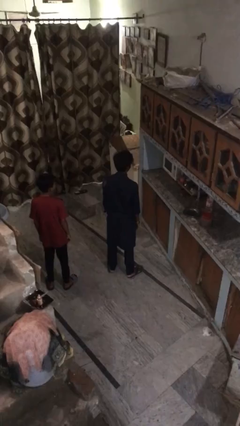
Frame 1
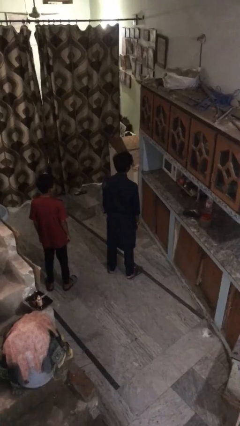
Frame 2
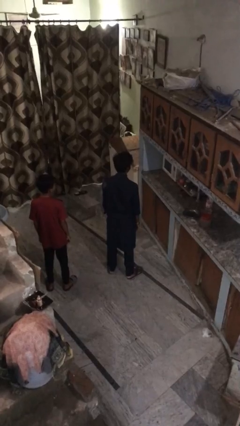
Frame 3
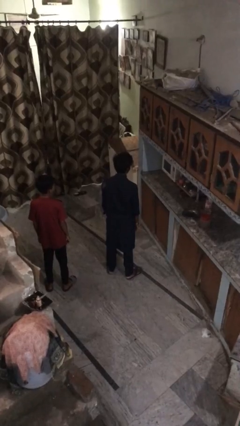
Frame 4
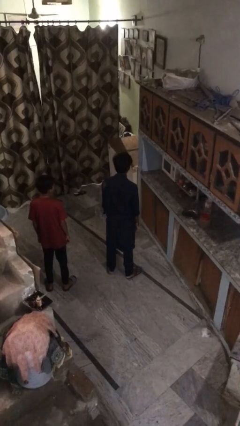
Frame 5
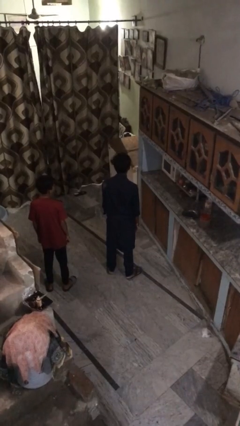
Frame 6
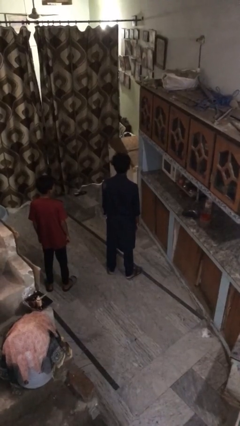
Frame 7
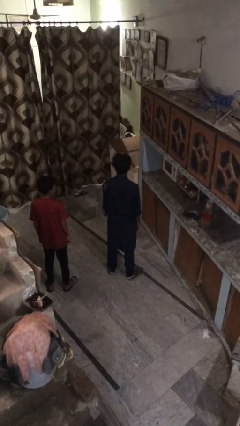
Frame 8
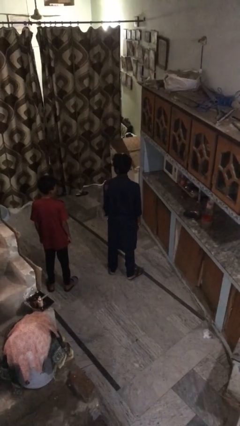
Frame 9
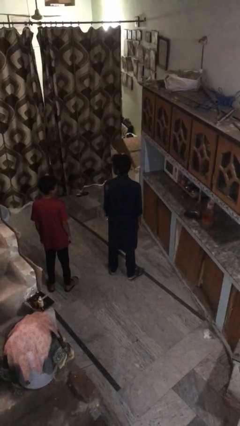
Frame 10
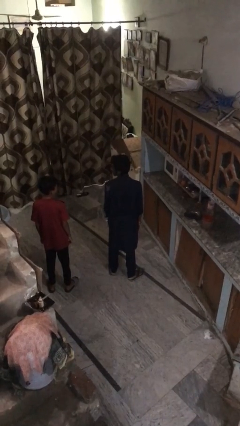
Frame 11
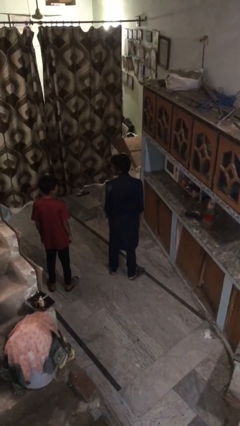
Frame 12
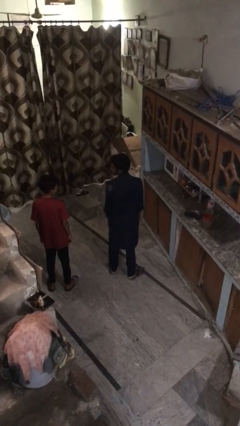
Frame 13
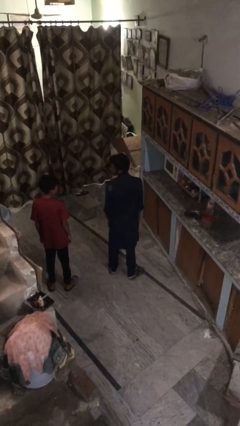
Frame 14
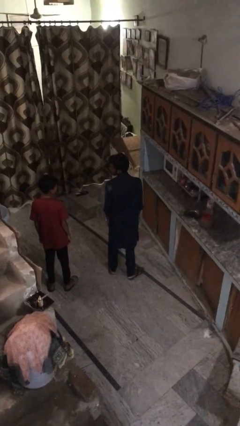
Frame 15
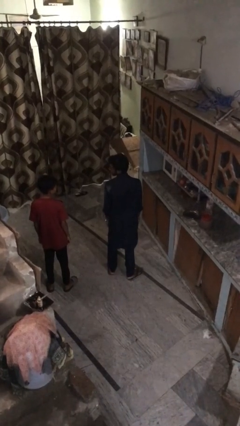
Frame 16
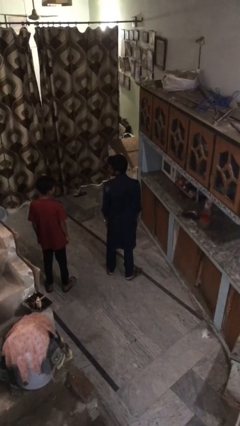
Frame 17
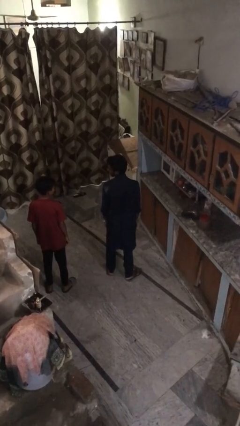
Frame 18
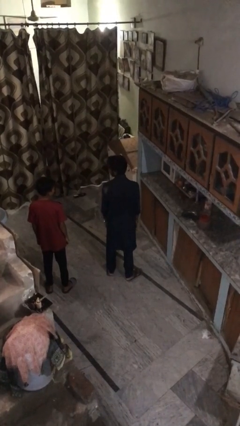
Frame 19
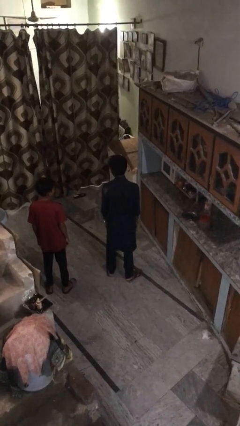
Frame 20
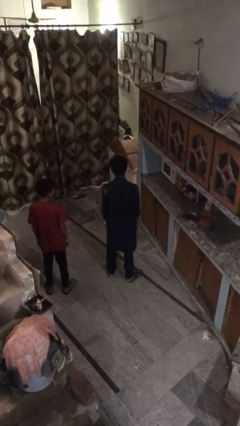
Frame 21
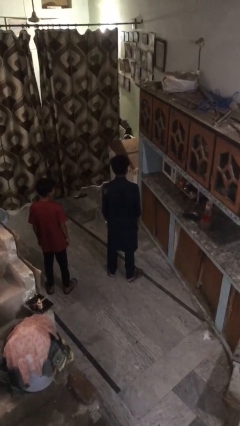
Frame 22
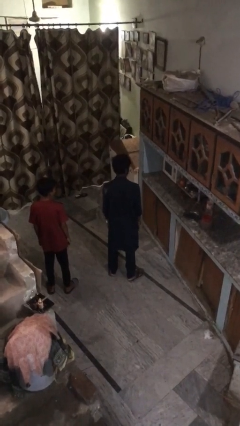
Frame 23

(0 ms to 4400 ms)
person looks over shoulder

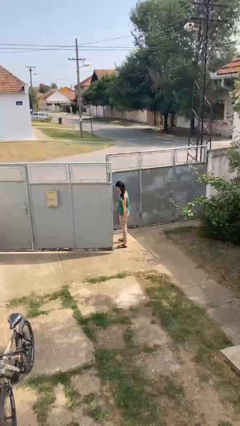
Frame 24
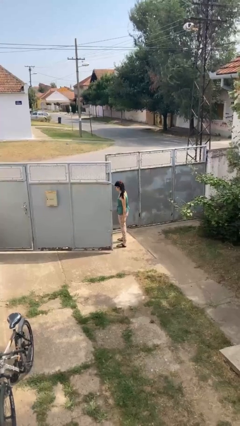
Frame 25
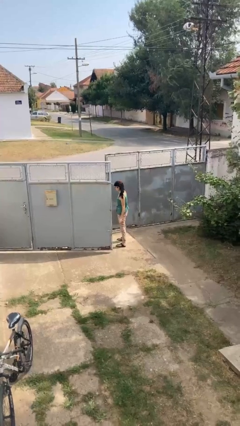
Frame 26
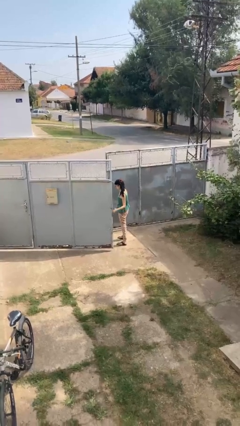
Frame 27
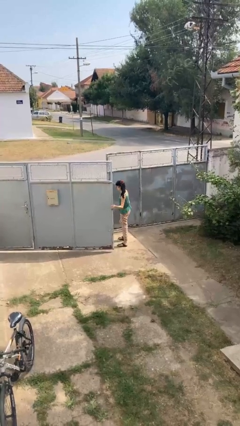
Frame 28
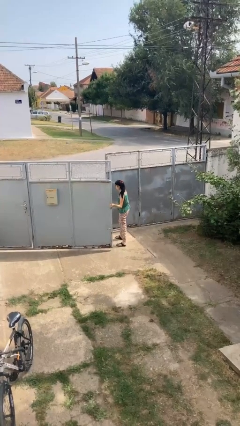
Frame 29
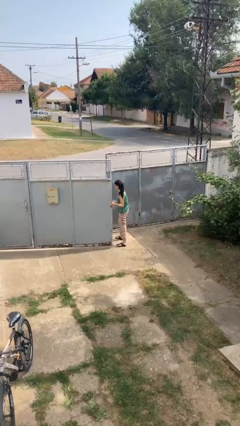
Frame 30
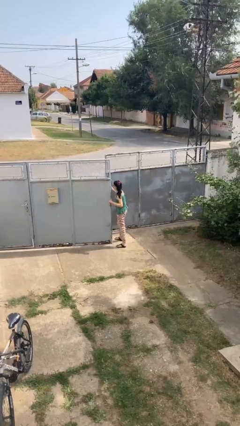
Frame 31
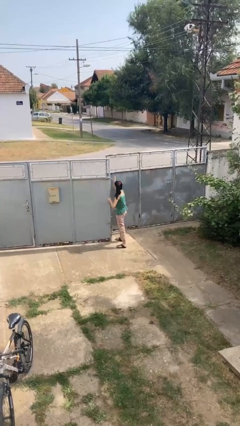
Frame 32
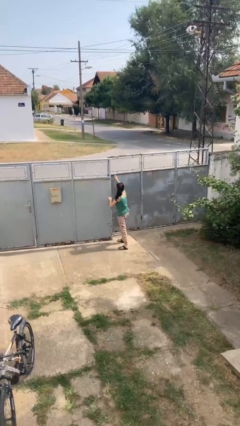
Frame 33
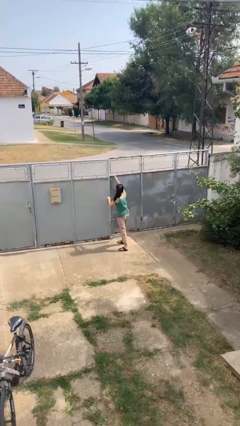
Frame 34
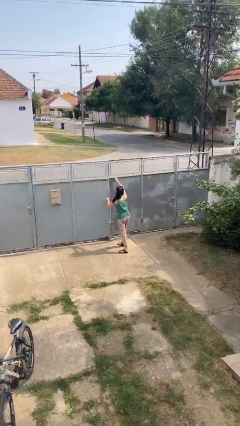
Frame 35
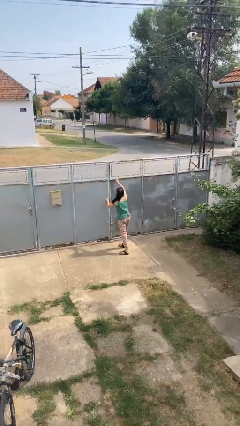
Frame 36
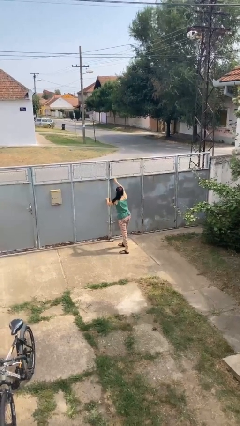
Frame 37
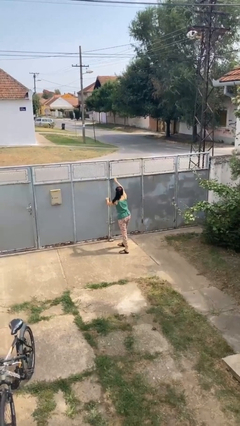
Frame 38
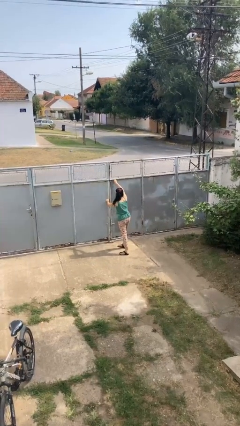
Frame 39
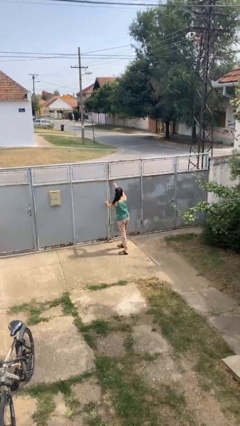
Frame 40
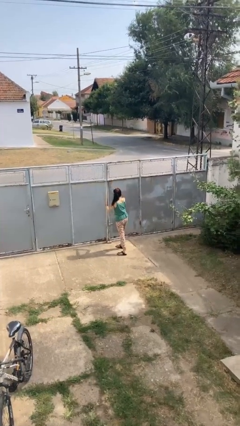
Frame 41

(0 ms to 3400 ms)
person closes gate

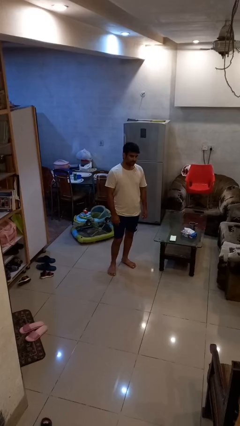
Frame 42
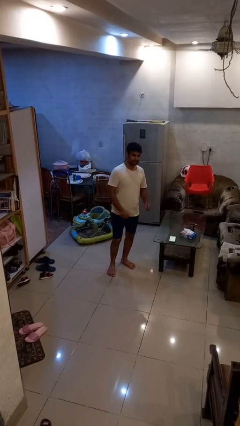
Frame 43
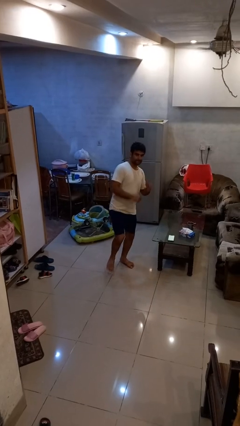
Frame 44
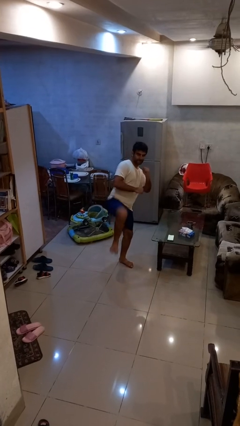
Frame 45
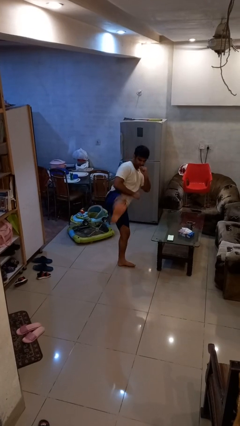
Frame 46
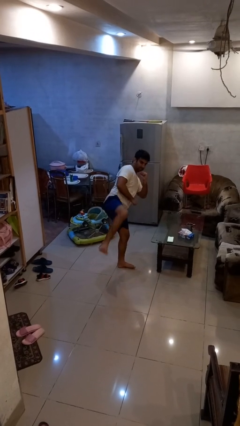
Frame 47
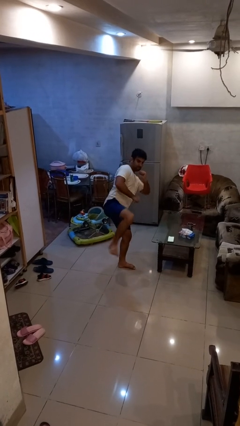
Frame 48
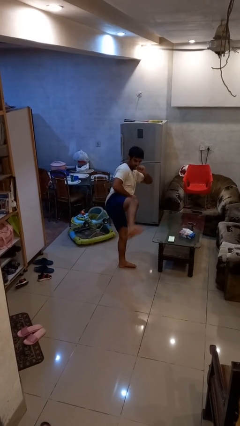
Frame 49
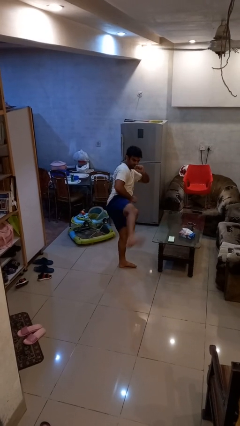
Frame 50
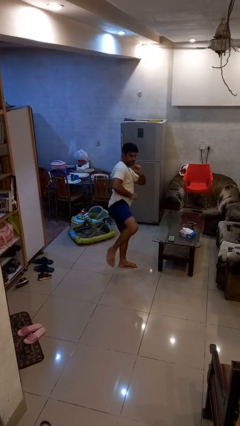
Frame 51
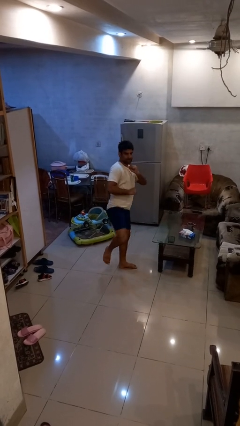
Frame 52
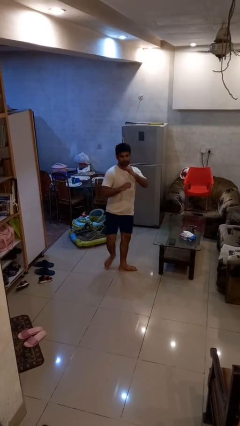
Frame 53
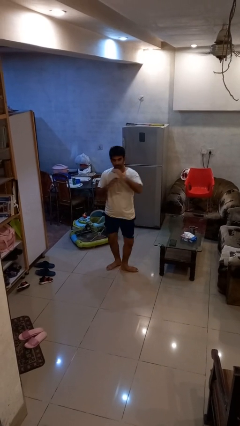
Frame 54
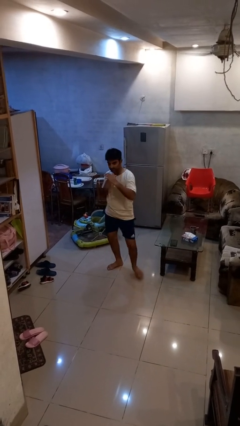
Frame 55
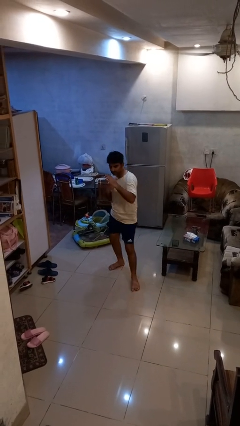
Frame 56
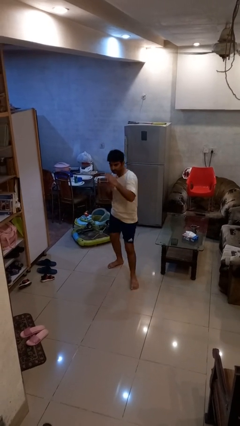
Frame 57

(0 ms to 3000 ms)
person karate kicks

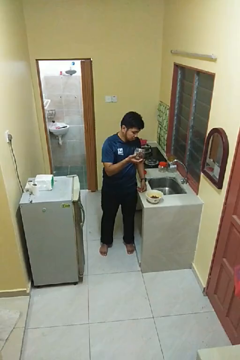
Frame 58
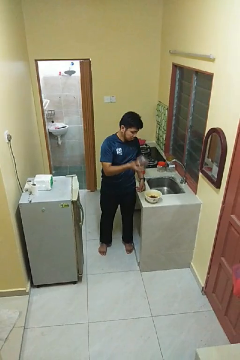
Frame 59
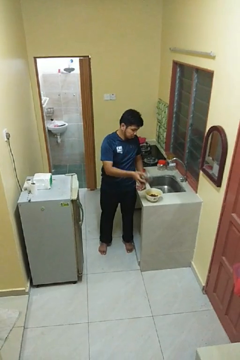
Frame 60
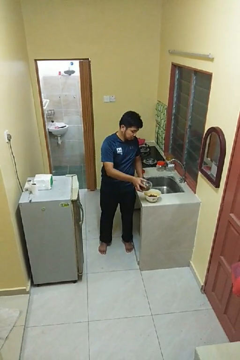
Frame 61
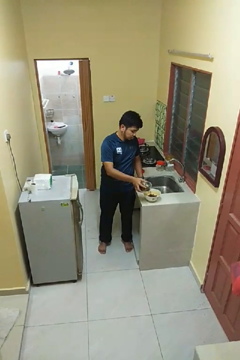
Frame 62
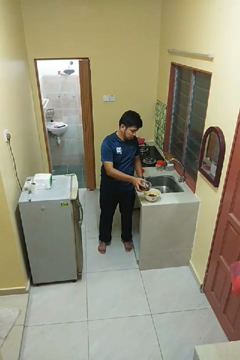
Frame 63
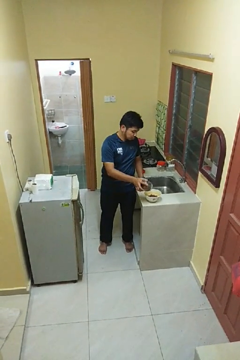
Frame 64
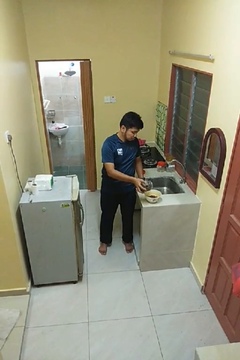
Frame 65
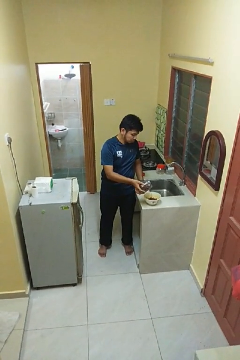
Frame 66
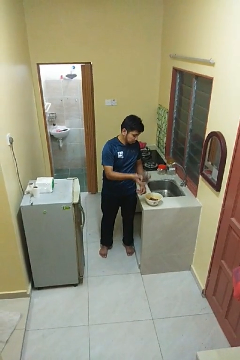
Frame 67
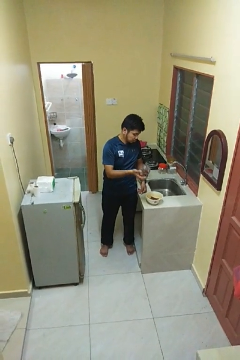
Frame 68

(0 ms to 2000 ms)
person pours into bowl

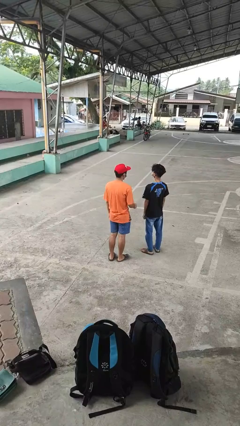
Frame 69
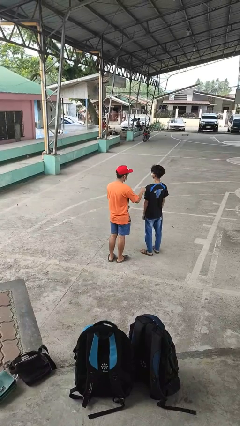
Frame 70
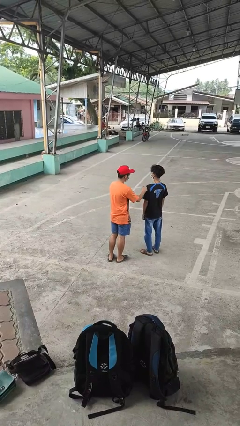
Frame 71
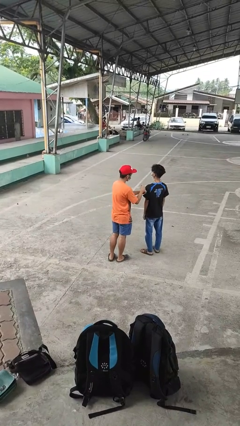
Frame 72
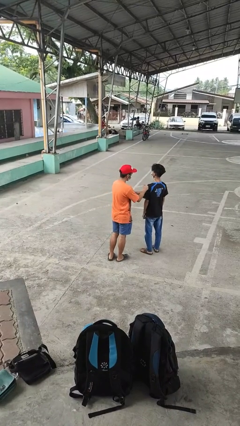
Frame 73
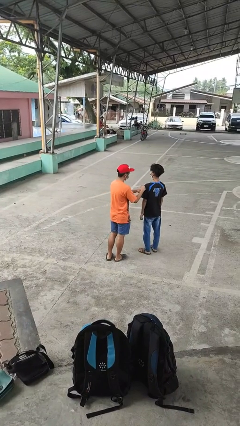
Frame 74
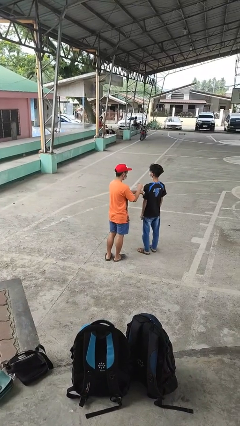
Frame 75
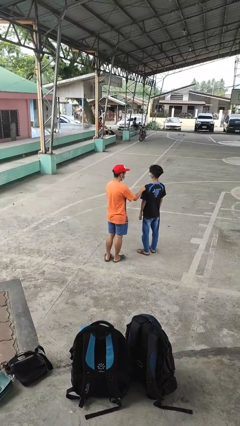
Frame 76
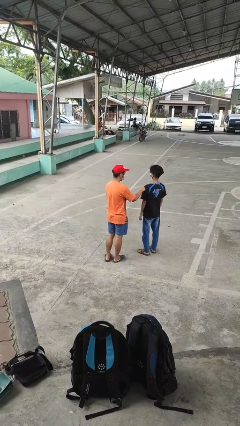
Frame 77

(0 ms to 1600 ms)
person pounds shoulders of person

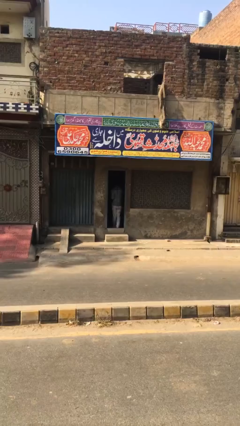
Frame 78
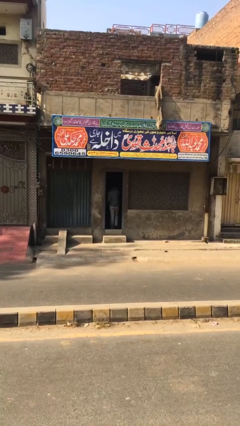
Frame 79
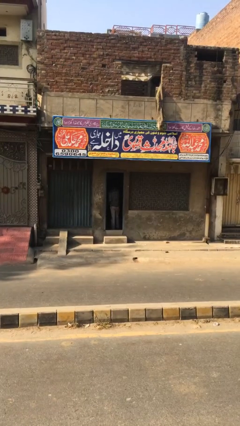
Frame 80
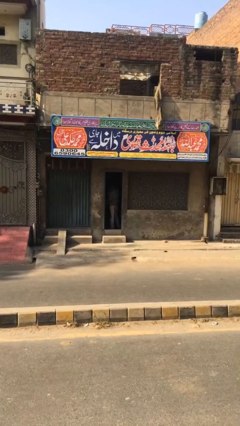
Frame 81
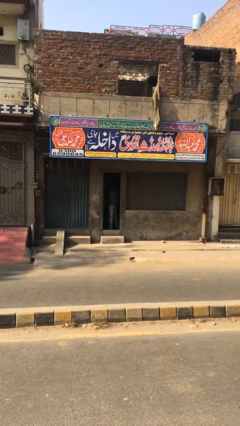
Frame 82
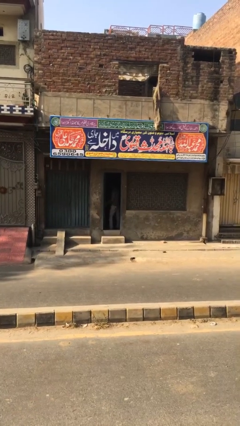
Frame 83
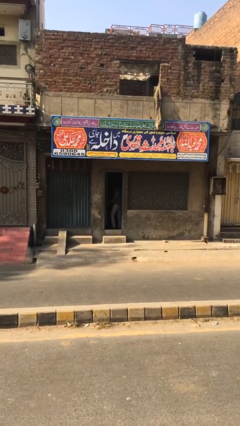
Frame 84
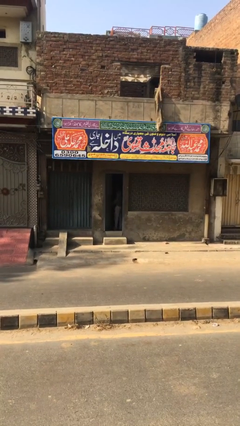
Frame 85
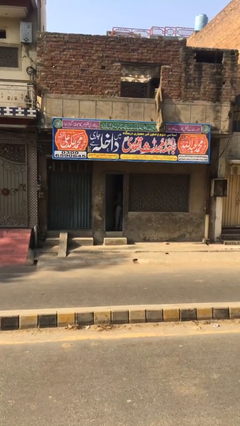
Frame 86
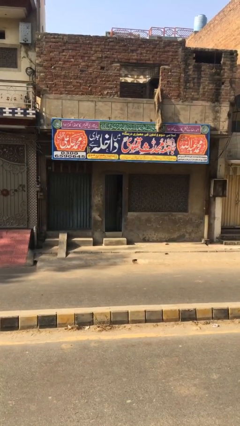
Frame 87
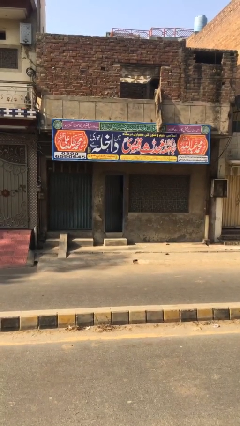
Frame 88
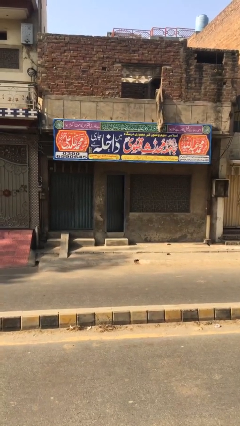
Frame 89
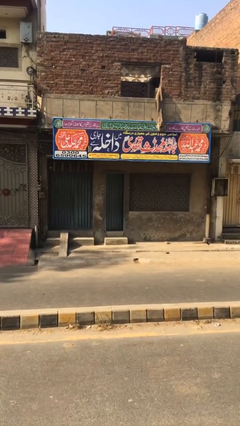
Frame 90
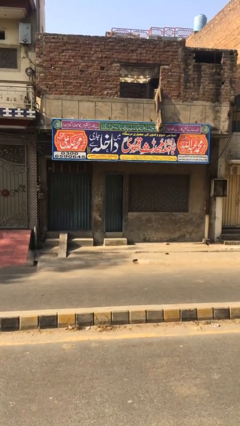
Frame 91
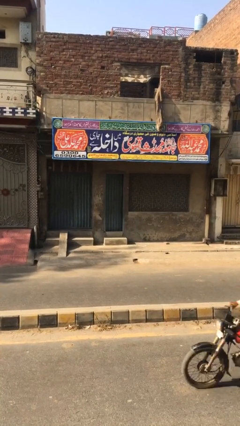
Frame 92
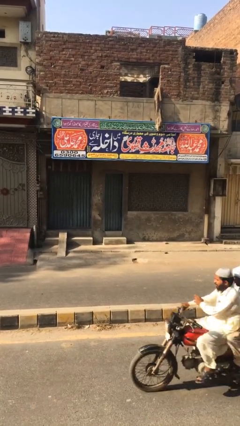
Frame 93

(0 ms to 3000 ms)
person closes facility door
